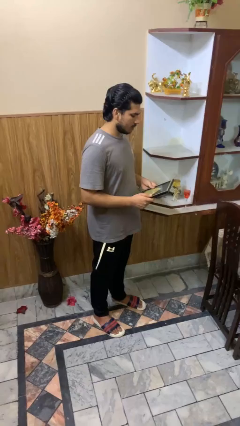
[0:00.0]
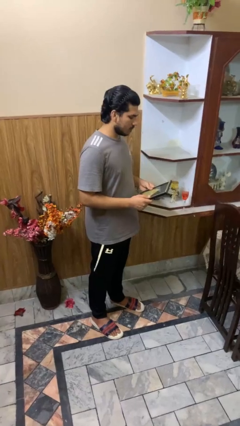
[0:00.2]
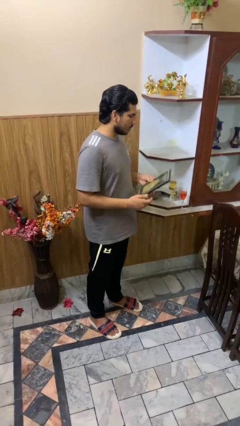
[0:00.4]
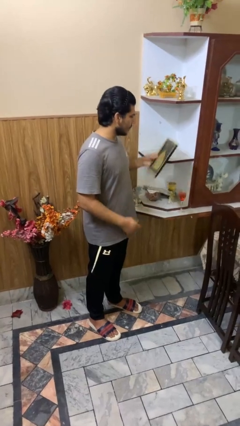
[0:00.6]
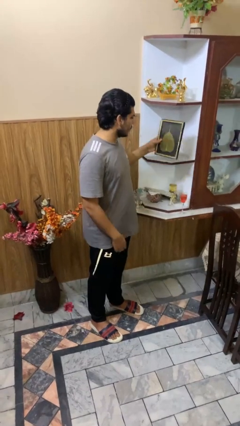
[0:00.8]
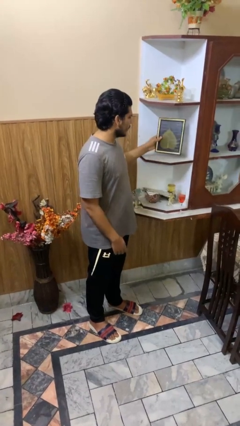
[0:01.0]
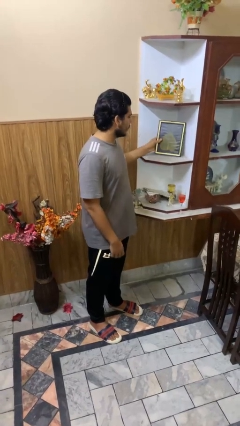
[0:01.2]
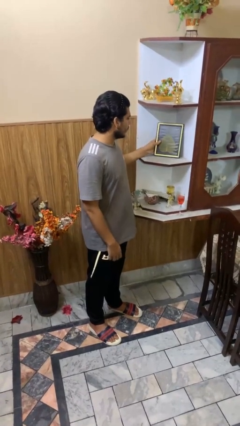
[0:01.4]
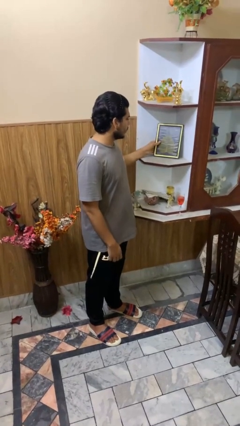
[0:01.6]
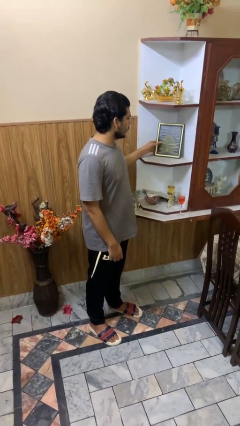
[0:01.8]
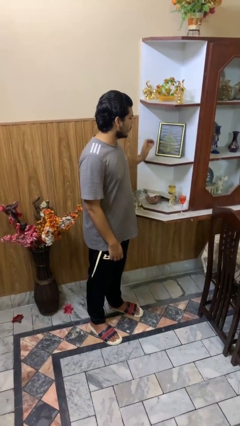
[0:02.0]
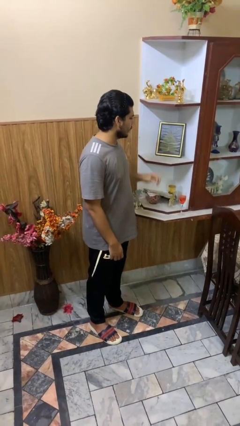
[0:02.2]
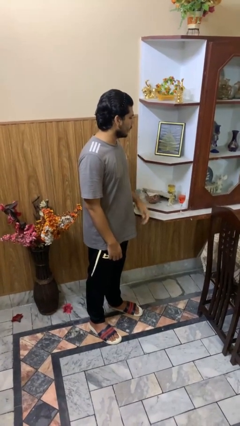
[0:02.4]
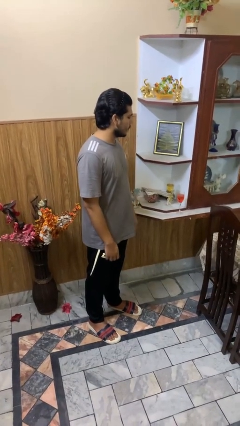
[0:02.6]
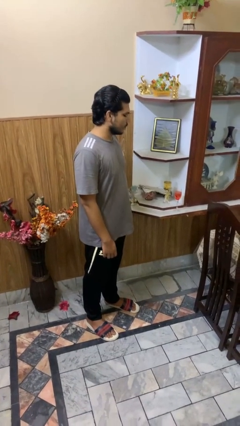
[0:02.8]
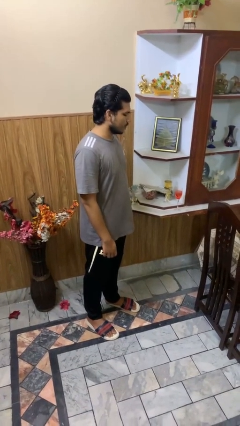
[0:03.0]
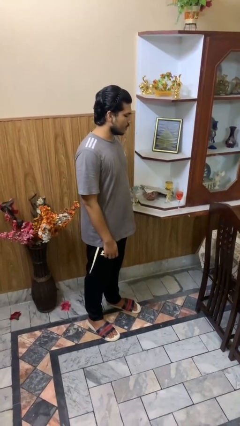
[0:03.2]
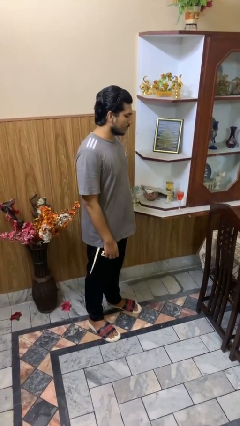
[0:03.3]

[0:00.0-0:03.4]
person puts up picture frame

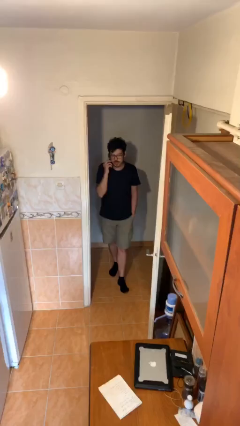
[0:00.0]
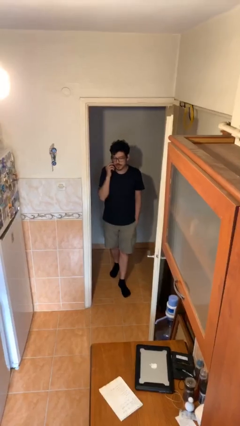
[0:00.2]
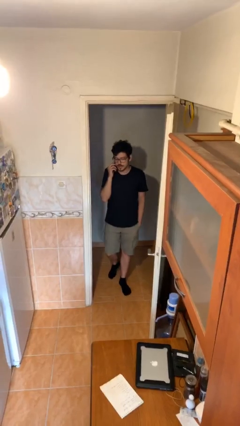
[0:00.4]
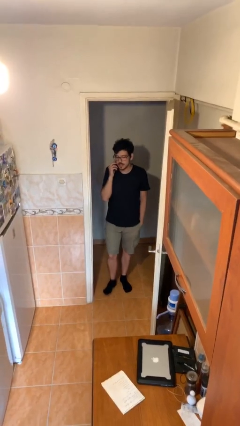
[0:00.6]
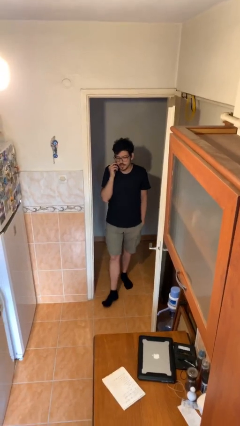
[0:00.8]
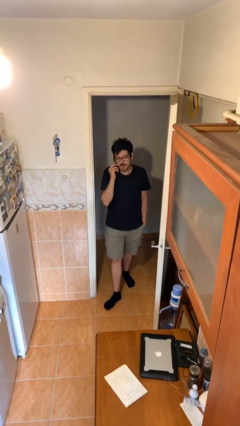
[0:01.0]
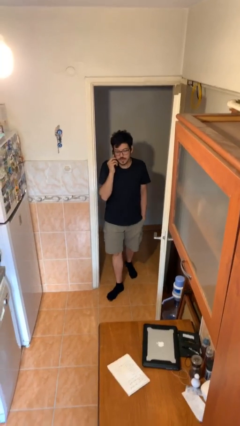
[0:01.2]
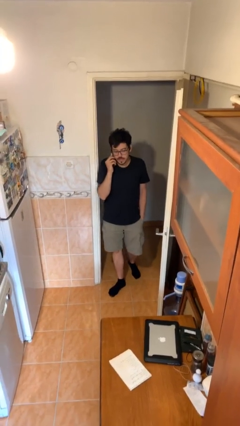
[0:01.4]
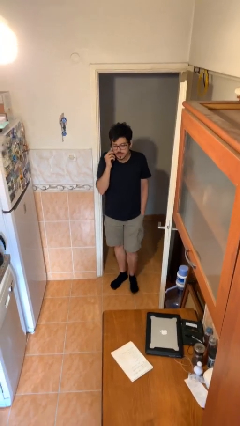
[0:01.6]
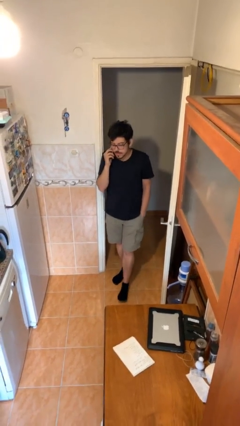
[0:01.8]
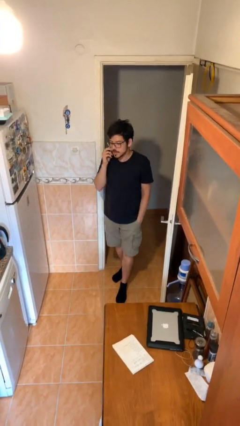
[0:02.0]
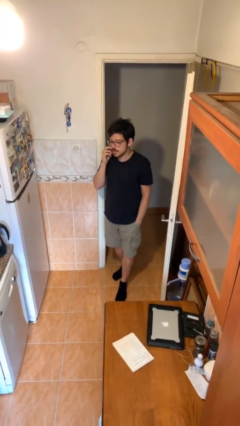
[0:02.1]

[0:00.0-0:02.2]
person enters scene through structure

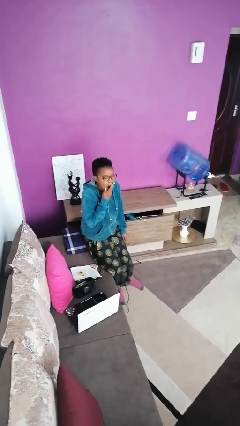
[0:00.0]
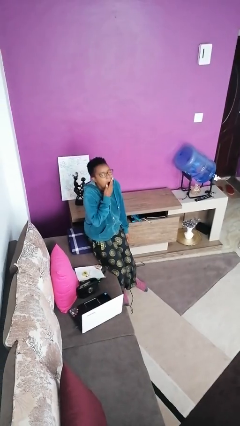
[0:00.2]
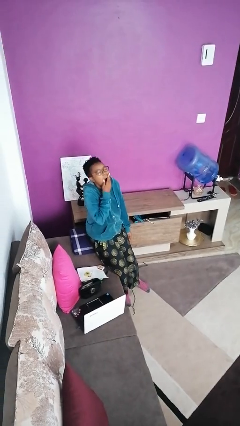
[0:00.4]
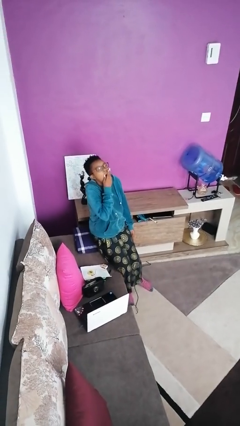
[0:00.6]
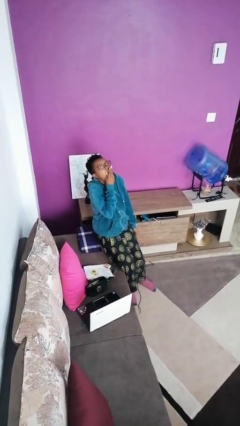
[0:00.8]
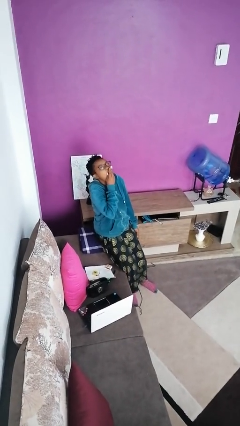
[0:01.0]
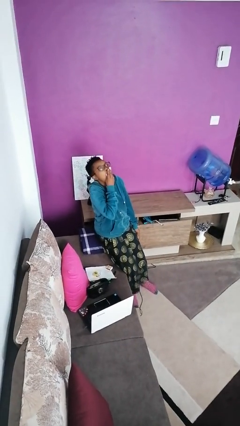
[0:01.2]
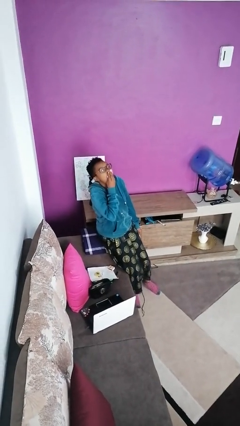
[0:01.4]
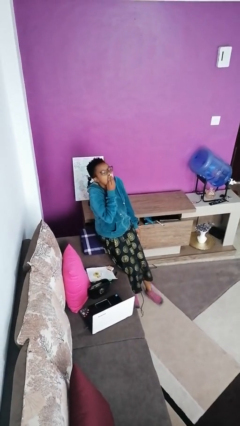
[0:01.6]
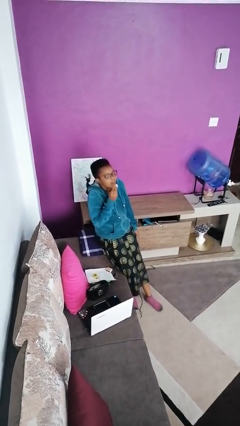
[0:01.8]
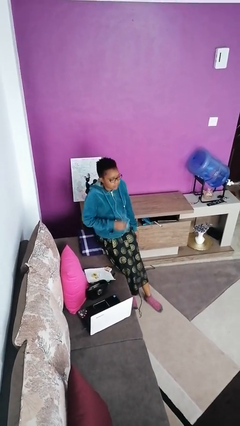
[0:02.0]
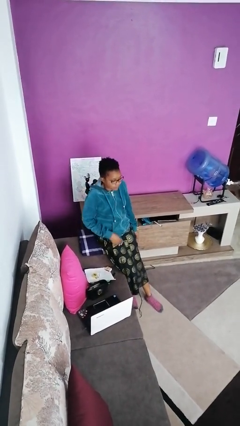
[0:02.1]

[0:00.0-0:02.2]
person closes cabinet

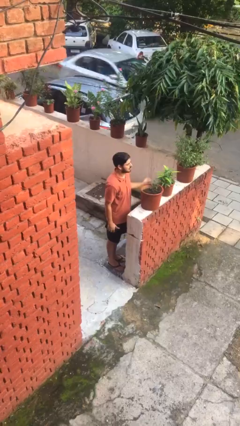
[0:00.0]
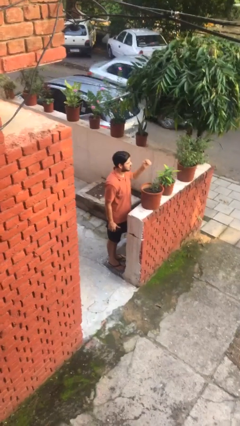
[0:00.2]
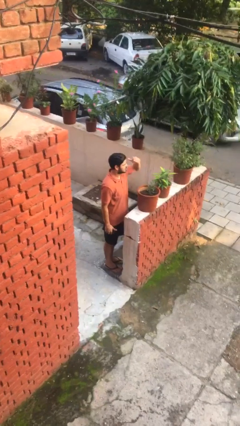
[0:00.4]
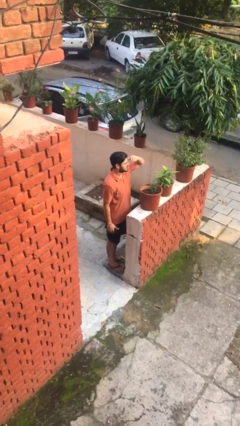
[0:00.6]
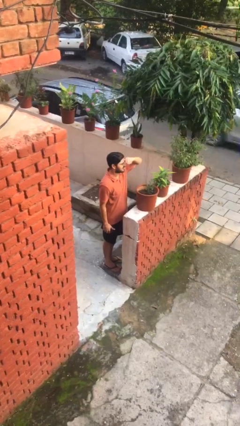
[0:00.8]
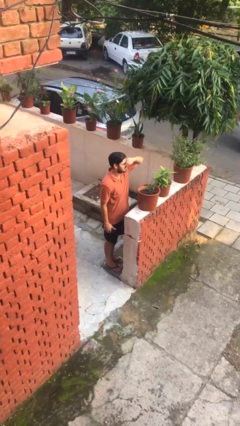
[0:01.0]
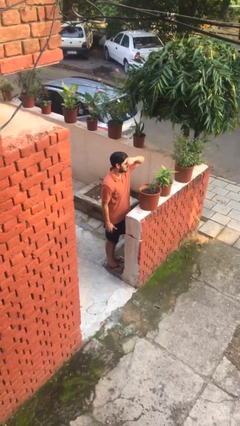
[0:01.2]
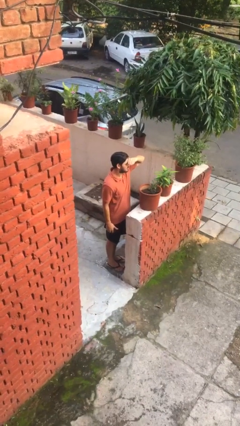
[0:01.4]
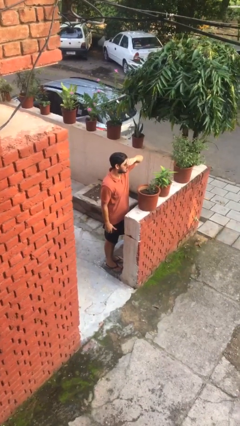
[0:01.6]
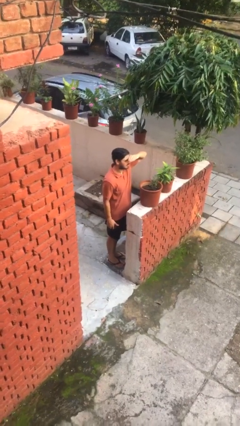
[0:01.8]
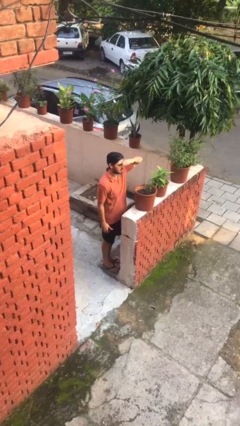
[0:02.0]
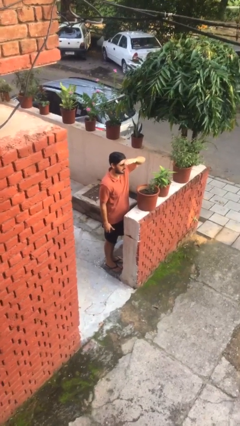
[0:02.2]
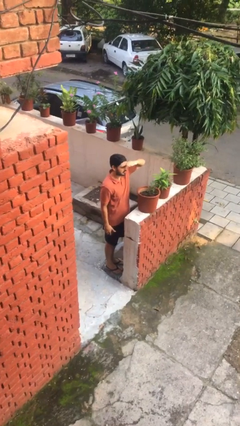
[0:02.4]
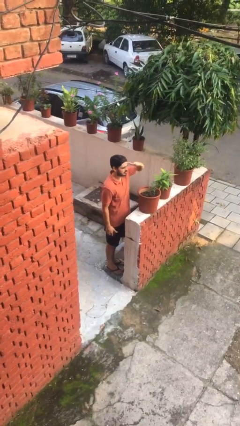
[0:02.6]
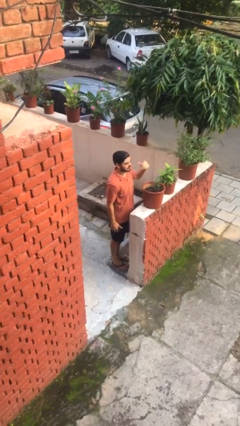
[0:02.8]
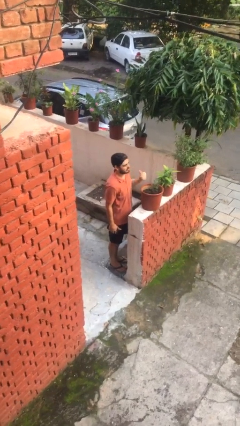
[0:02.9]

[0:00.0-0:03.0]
person shades eyes

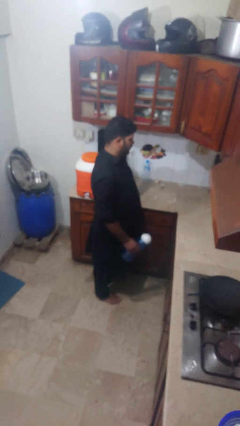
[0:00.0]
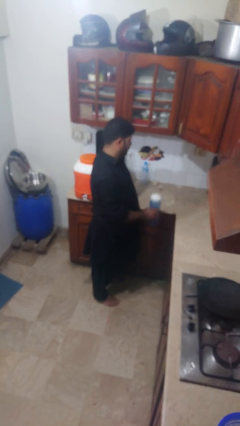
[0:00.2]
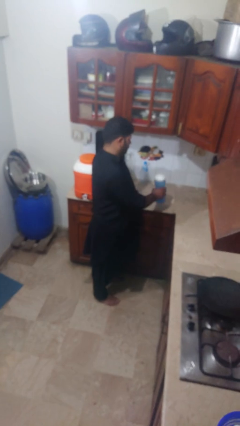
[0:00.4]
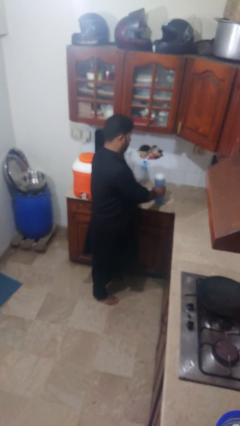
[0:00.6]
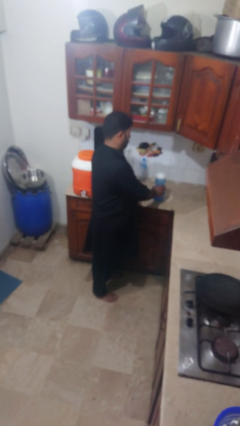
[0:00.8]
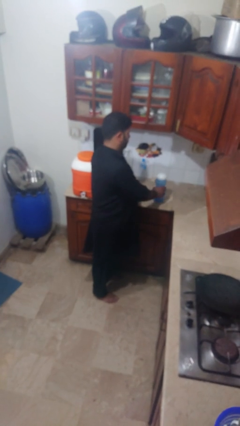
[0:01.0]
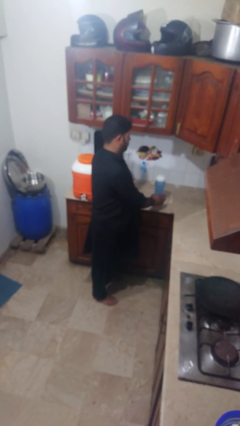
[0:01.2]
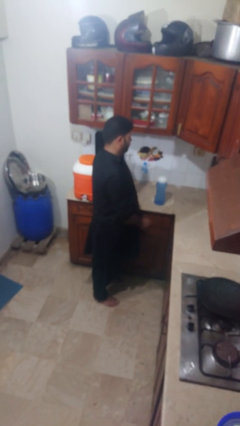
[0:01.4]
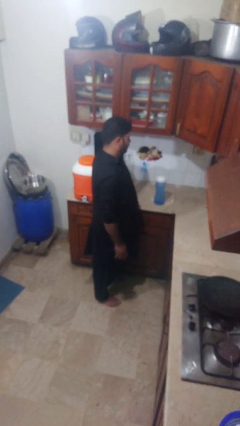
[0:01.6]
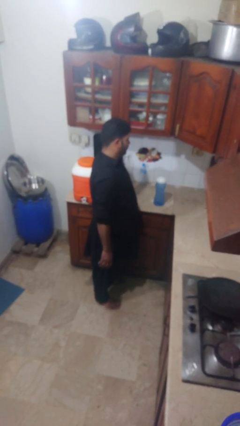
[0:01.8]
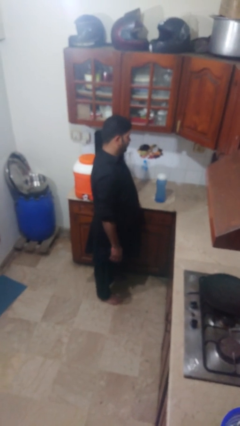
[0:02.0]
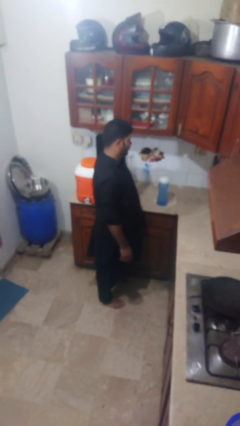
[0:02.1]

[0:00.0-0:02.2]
person puts down object on countertop

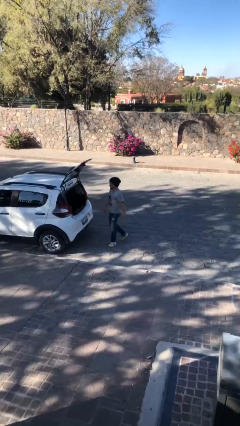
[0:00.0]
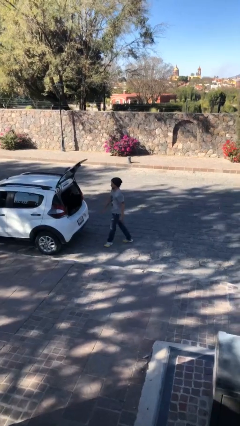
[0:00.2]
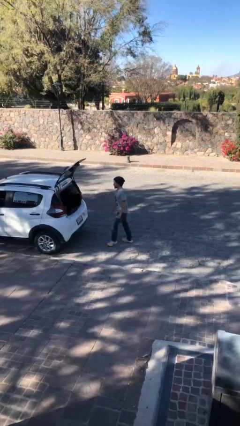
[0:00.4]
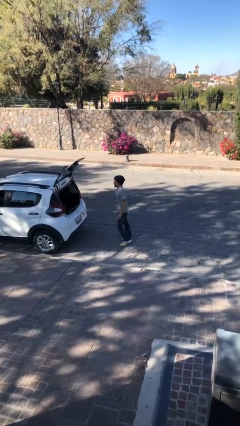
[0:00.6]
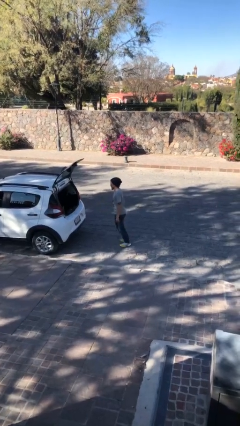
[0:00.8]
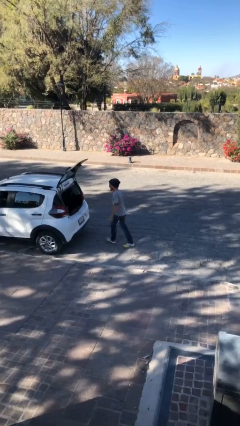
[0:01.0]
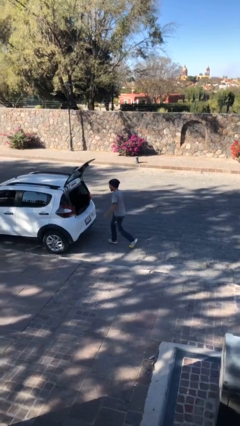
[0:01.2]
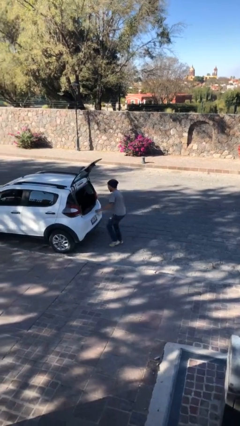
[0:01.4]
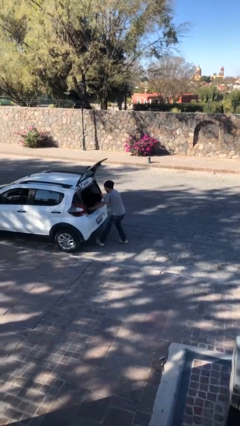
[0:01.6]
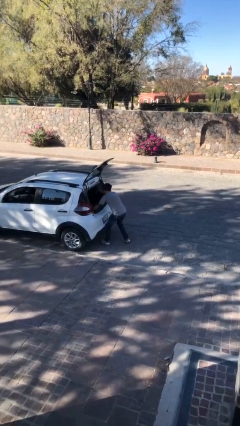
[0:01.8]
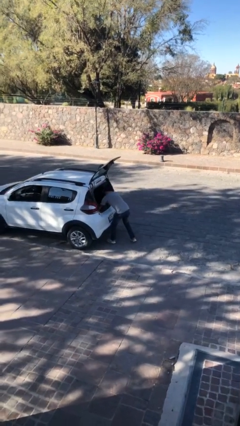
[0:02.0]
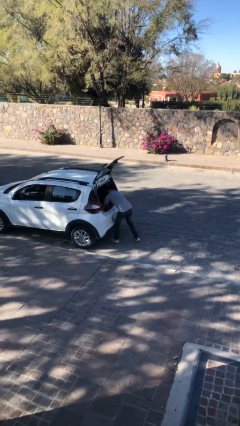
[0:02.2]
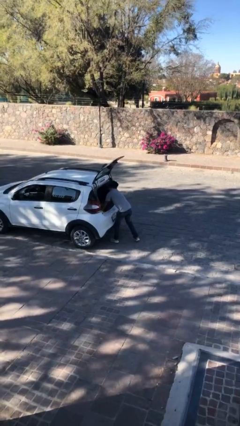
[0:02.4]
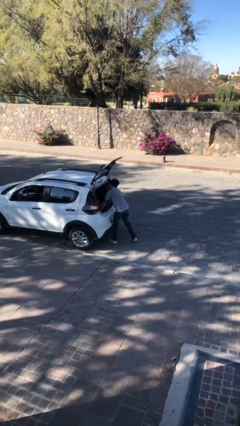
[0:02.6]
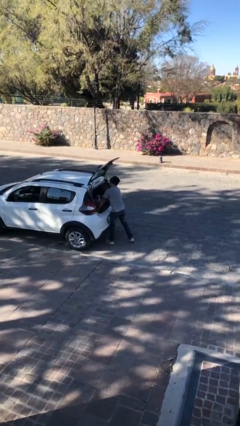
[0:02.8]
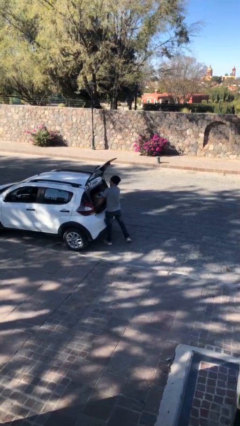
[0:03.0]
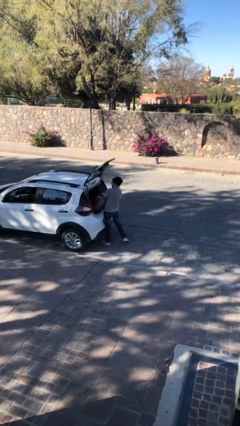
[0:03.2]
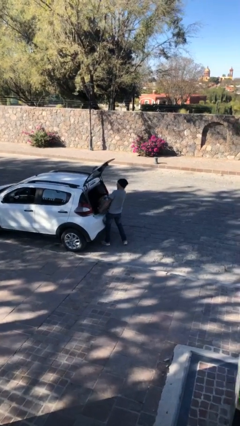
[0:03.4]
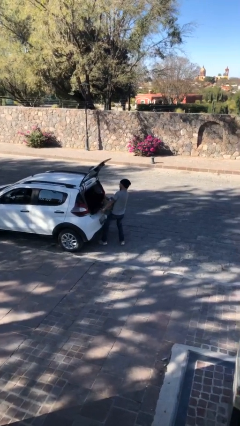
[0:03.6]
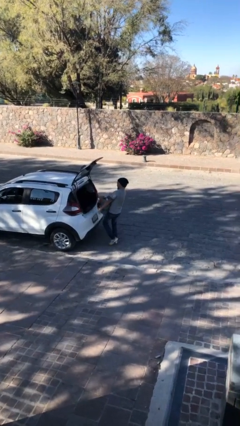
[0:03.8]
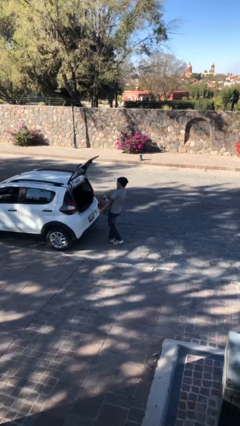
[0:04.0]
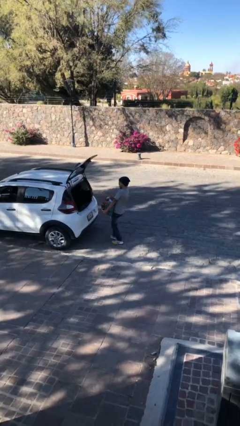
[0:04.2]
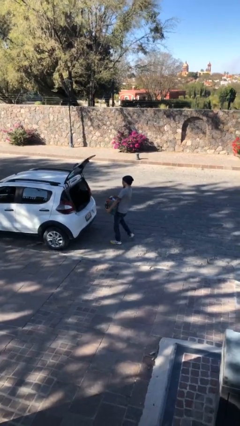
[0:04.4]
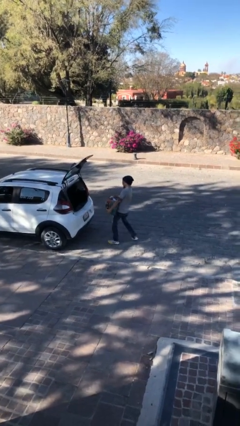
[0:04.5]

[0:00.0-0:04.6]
person unloads car
